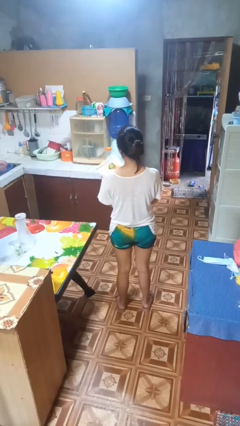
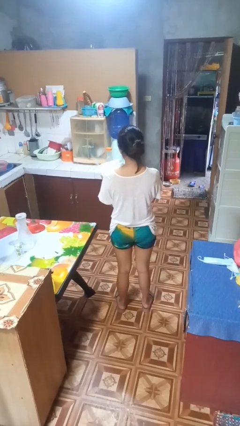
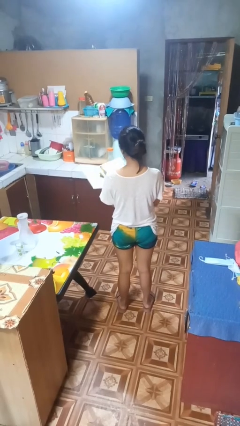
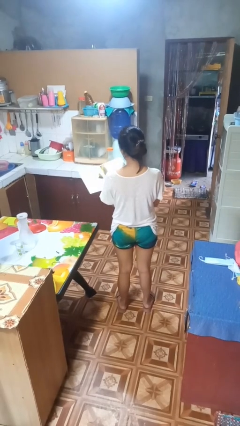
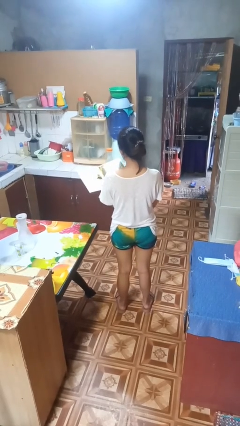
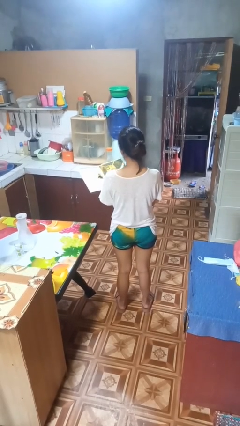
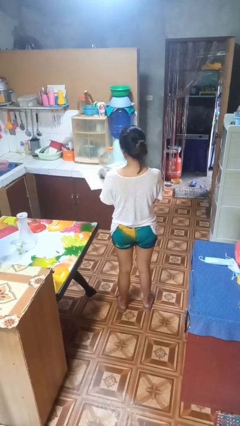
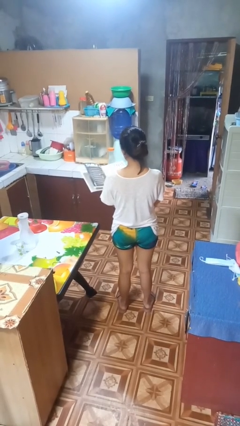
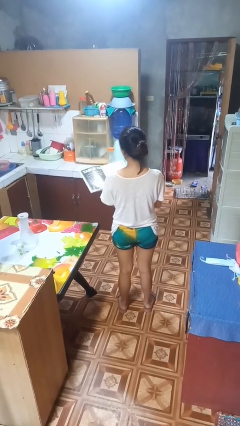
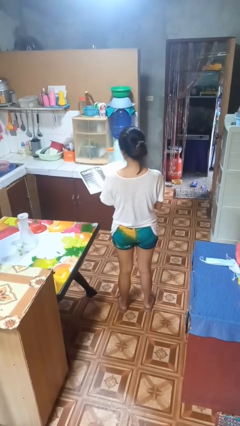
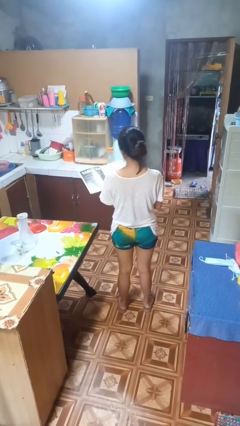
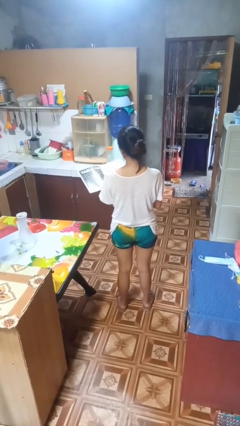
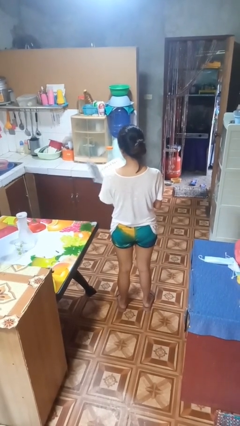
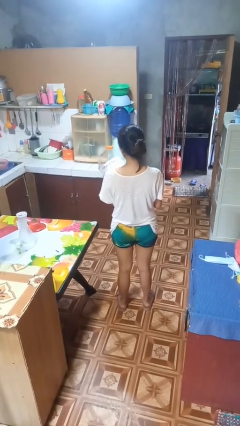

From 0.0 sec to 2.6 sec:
person reads magazine

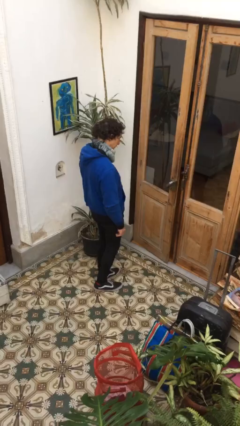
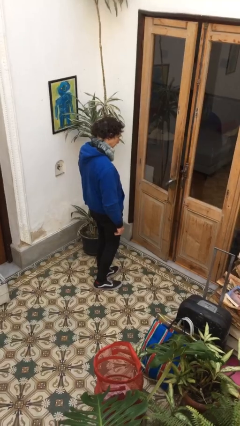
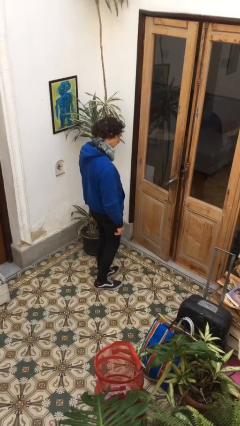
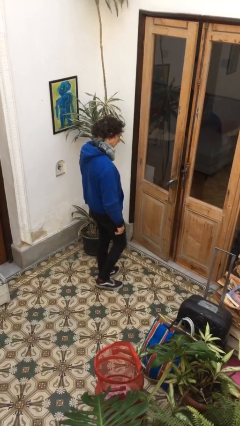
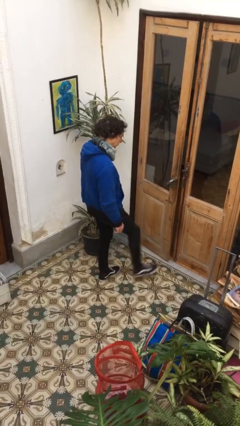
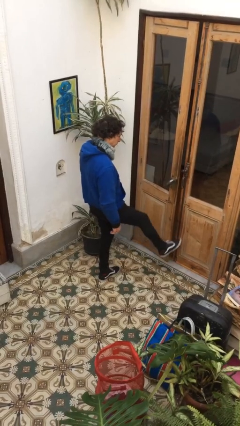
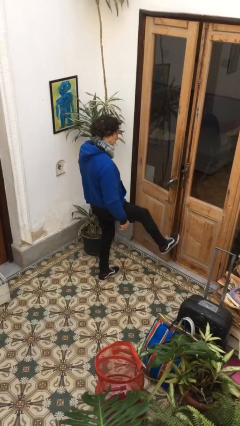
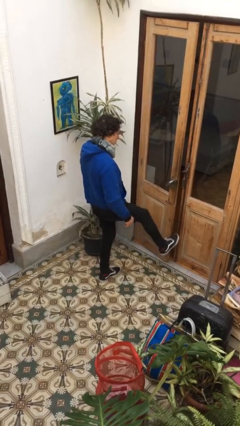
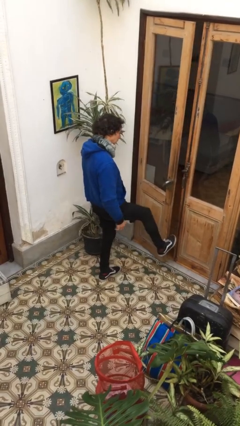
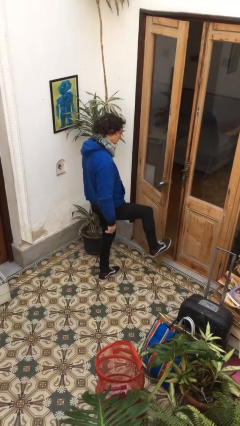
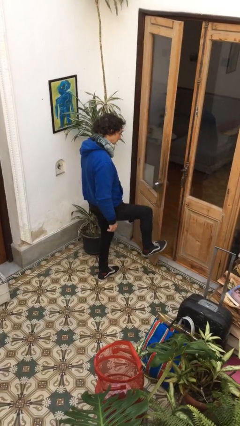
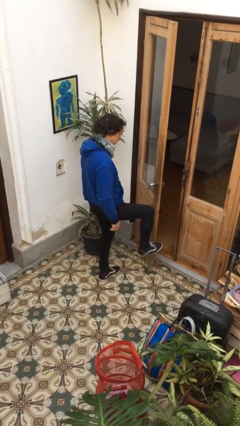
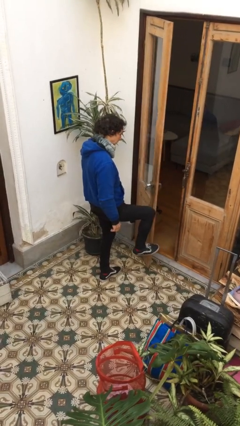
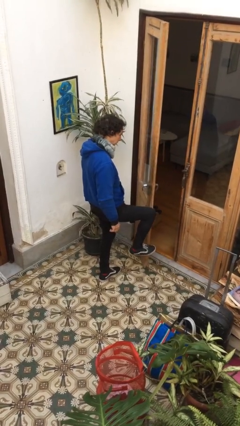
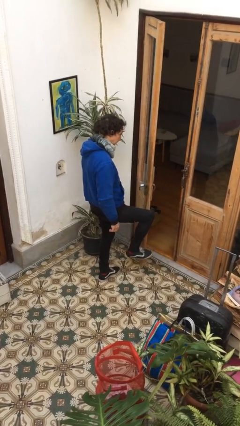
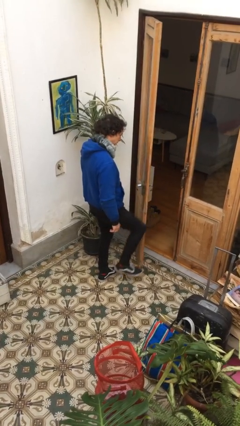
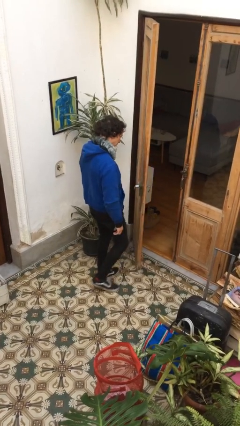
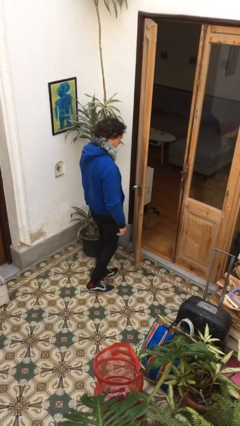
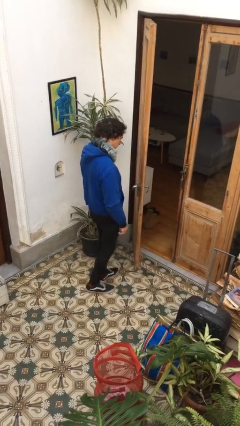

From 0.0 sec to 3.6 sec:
person opens facility door

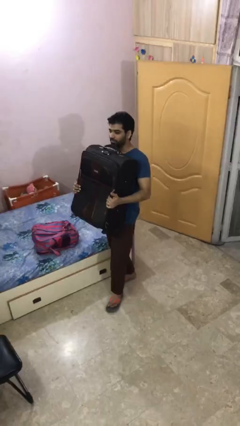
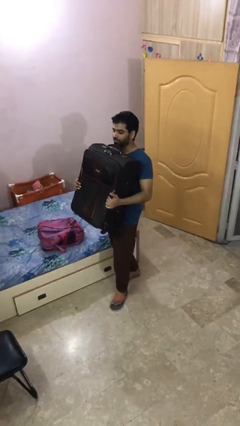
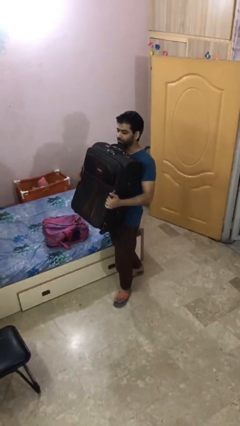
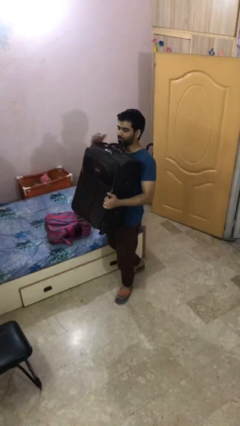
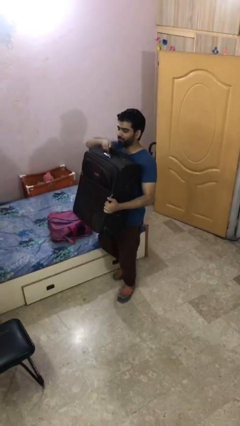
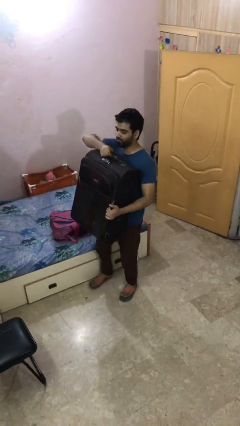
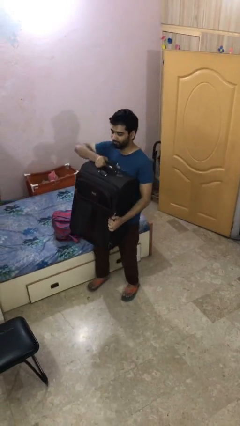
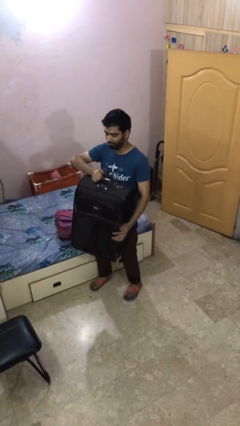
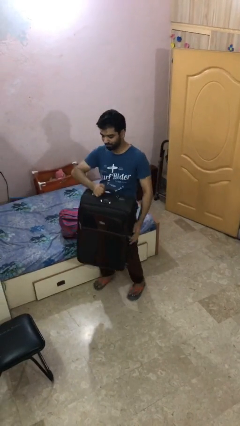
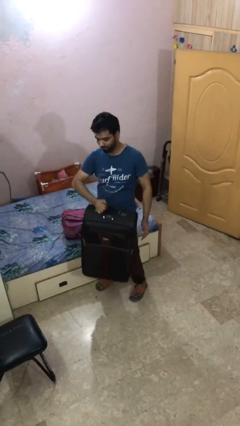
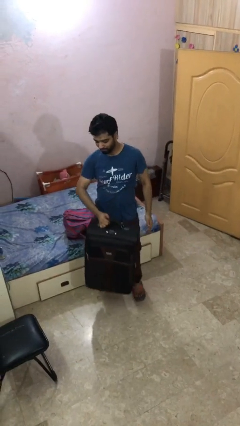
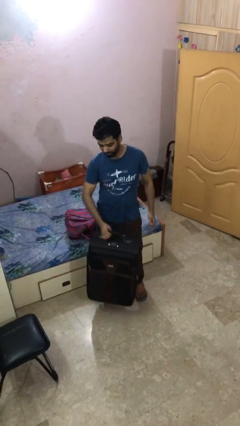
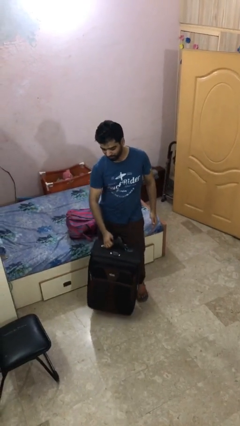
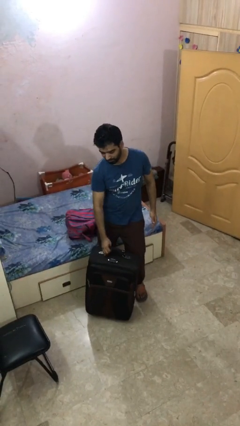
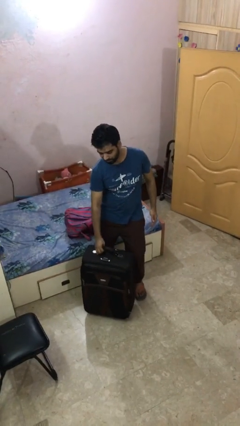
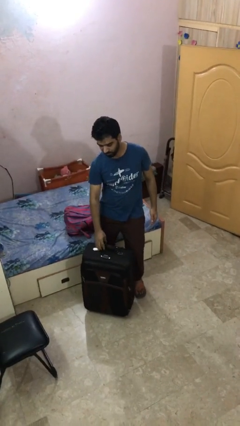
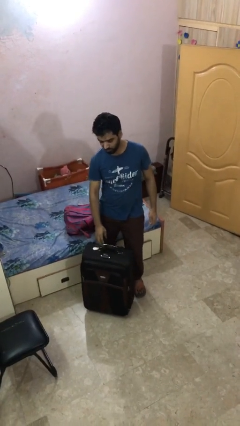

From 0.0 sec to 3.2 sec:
person puts down object on floor

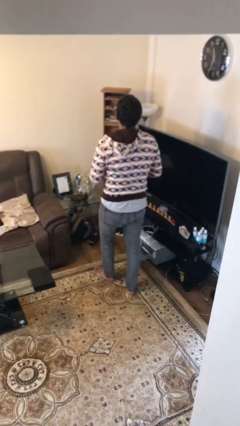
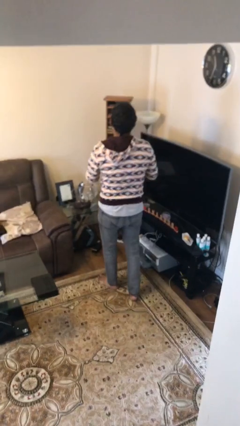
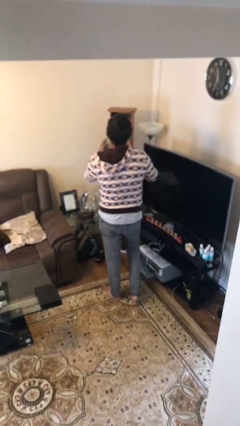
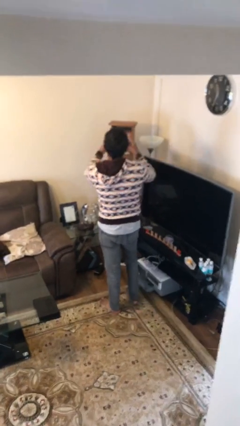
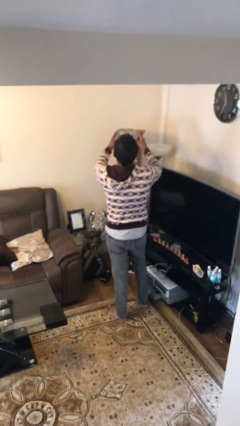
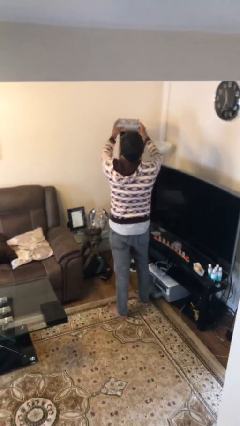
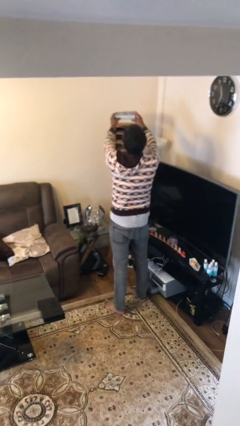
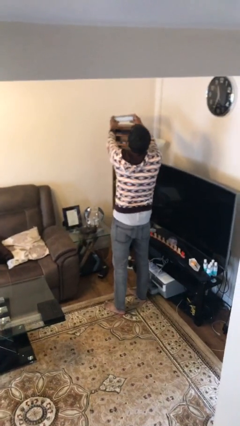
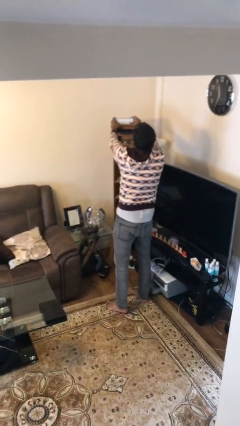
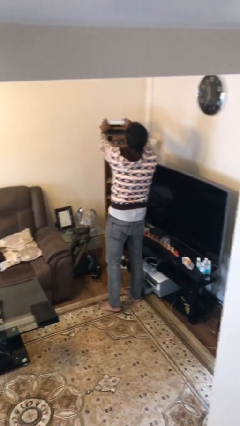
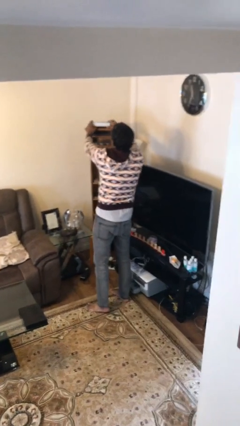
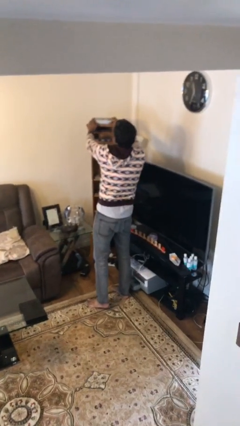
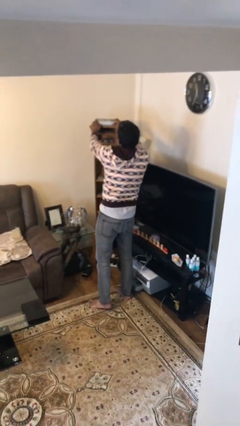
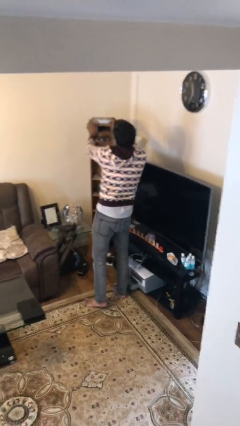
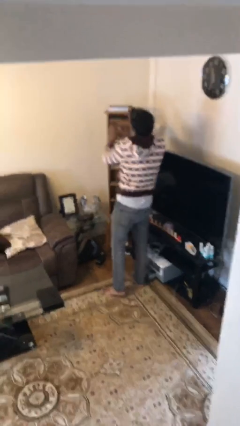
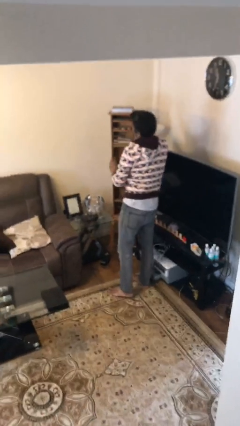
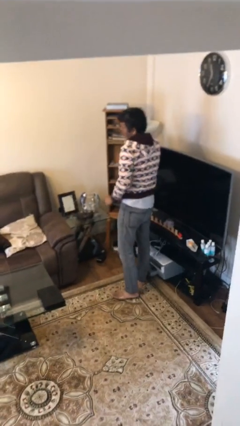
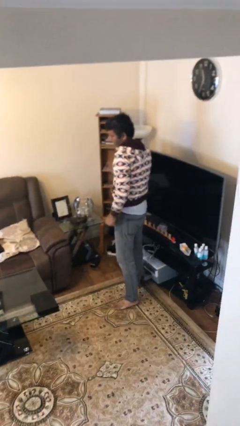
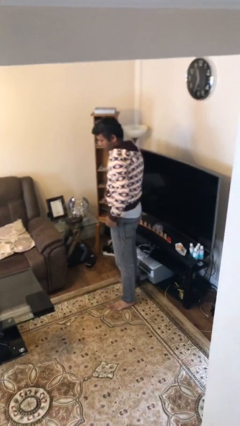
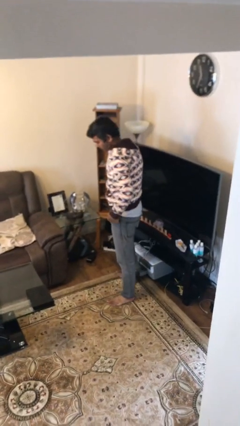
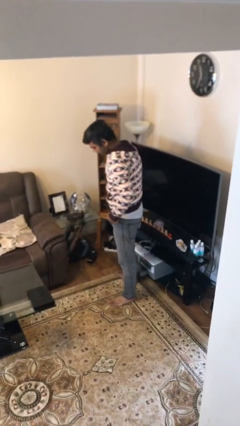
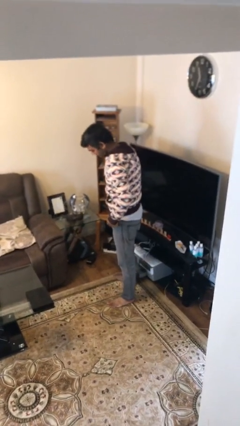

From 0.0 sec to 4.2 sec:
person puts down object on shelf

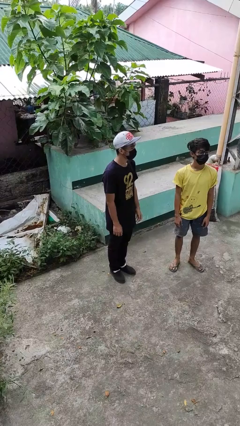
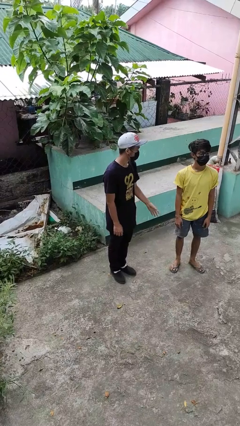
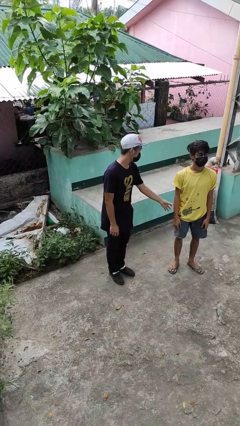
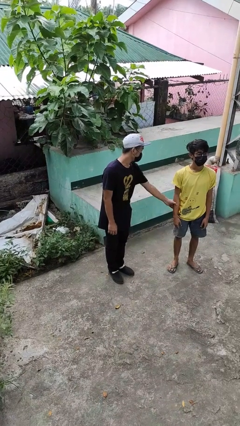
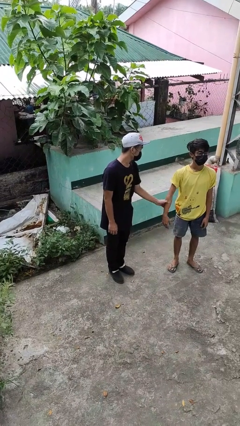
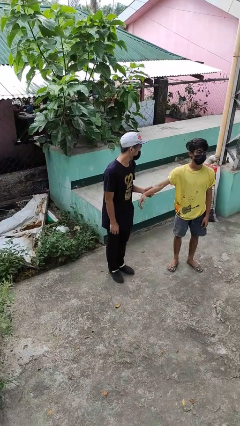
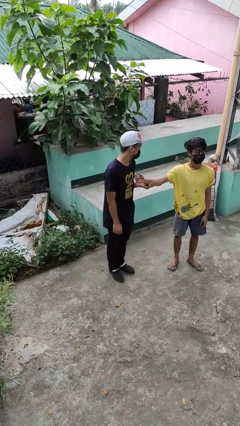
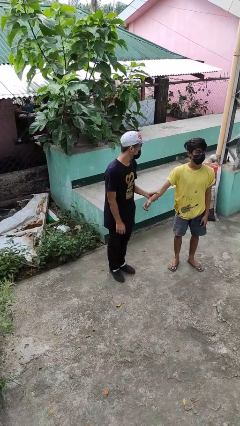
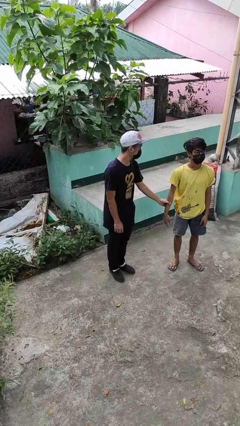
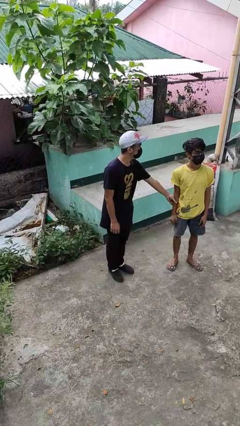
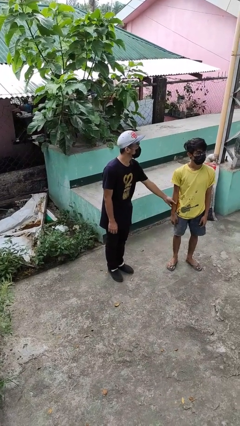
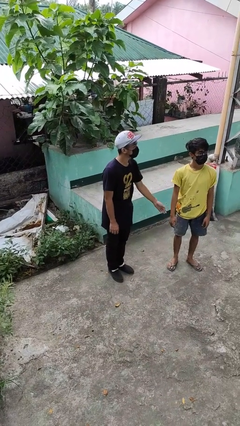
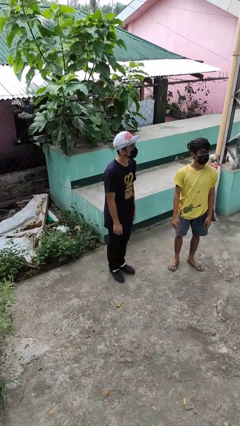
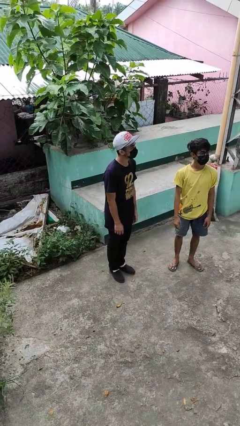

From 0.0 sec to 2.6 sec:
person grabs person by forearm

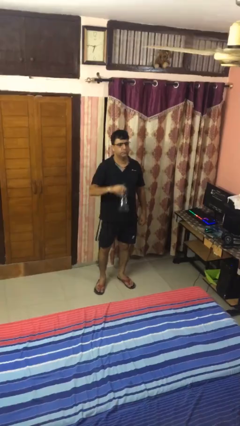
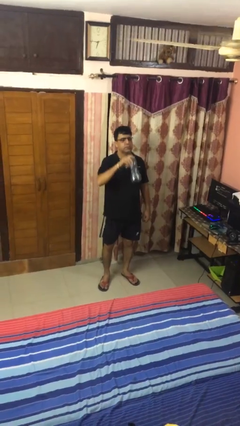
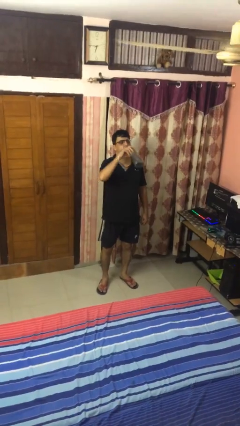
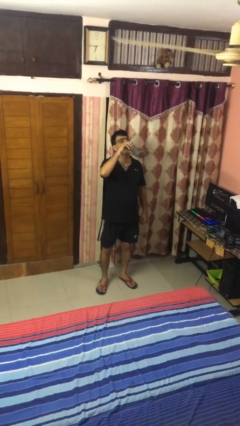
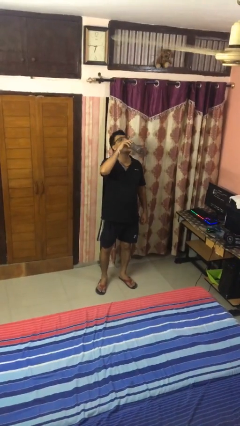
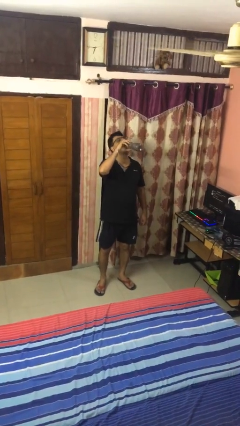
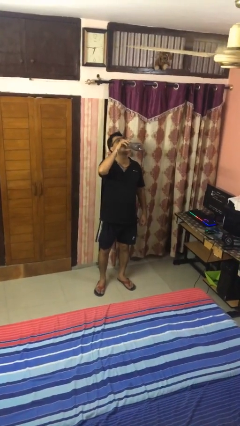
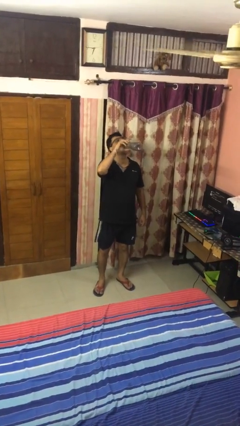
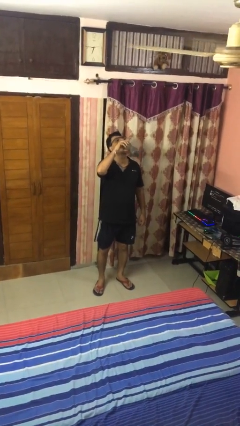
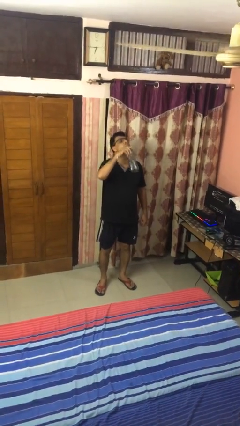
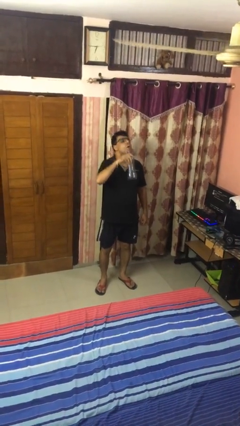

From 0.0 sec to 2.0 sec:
person drinks from bottle
